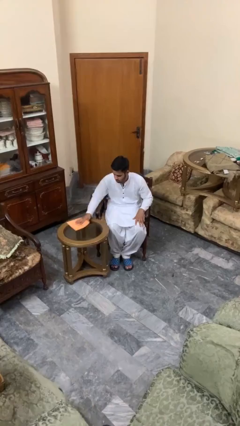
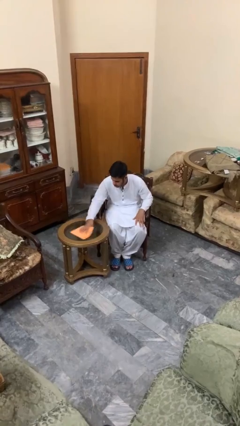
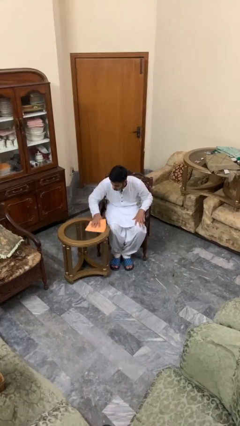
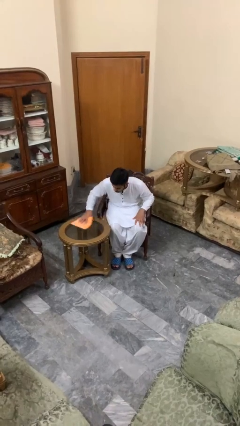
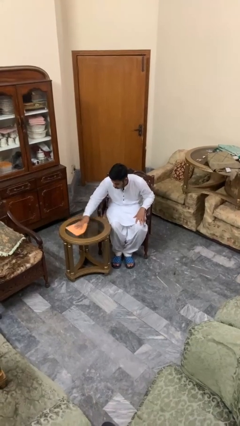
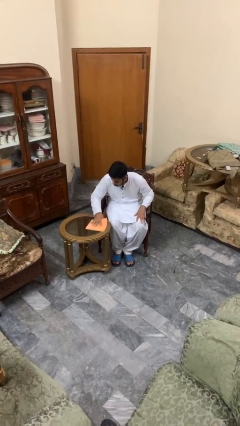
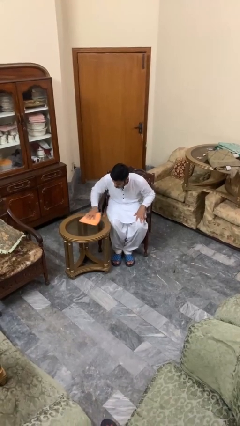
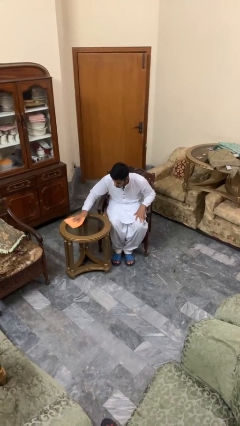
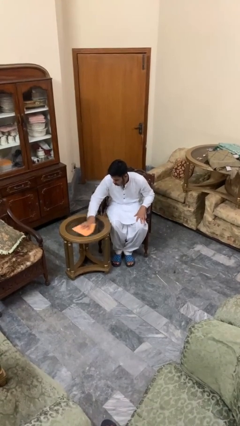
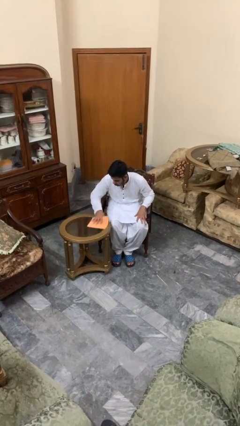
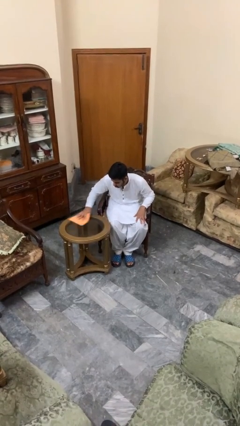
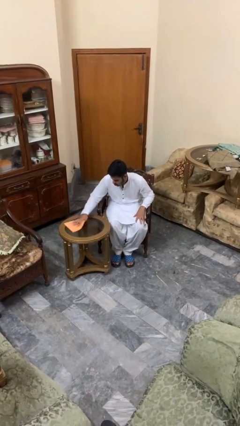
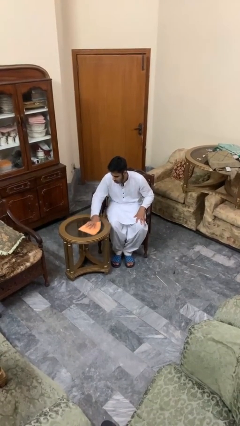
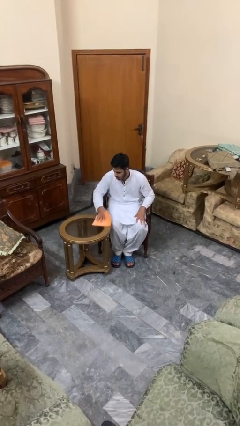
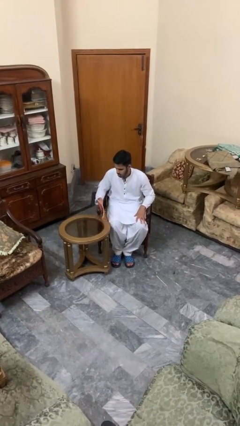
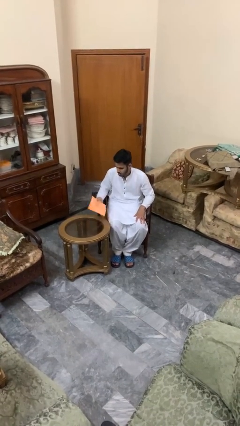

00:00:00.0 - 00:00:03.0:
person cleans table with rag

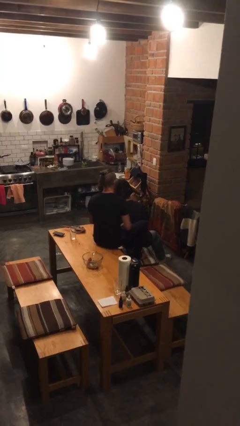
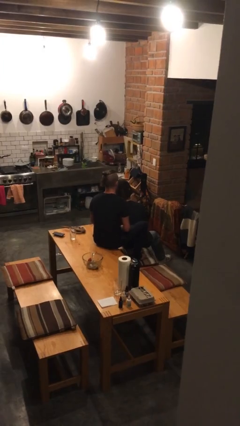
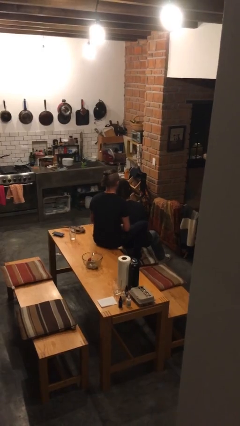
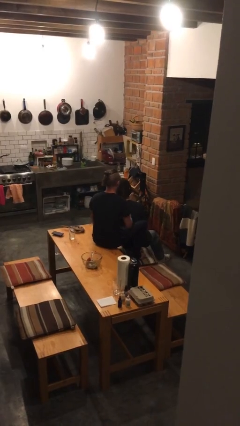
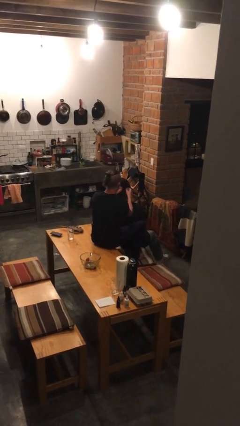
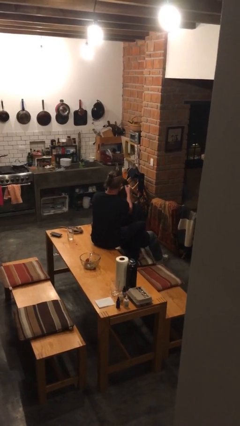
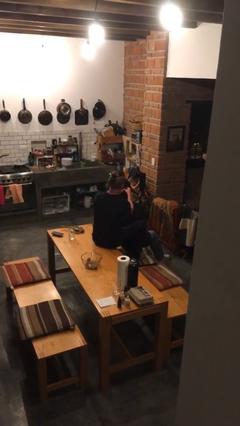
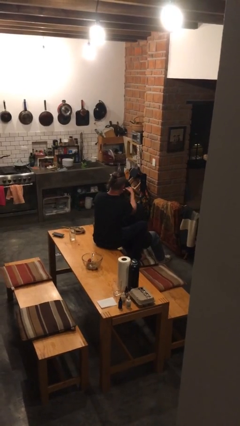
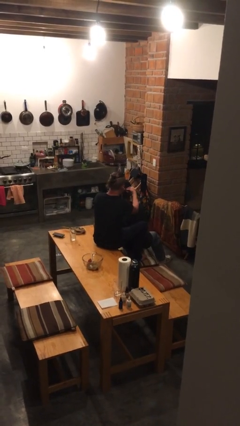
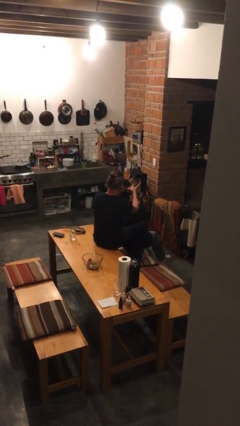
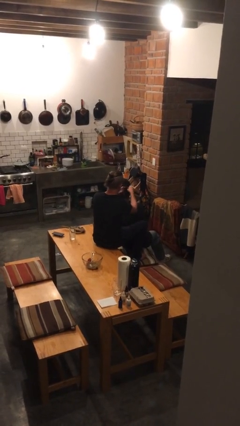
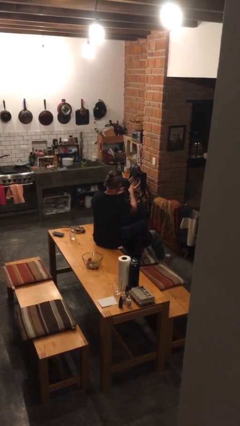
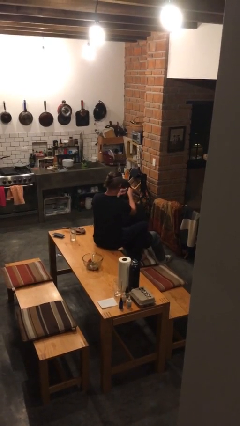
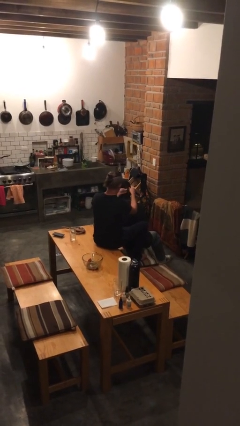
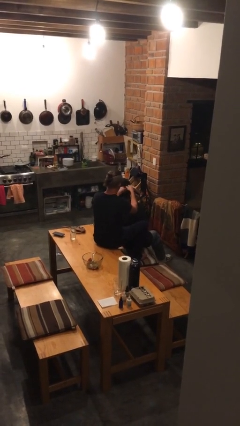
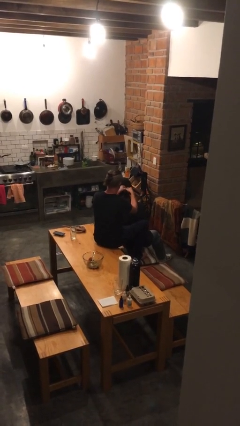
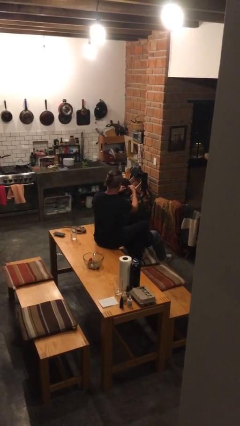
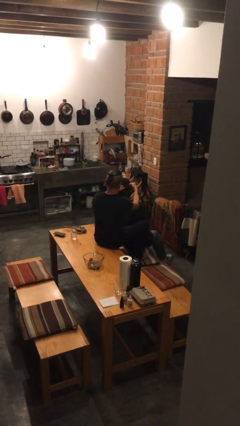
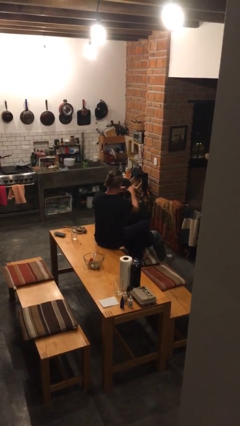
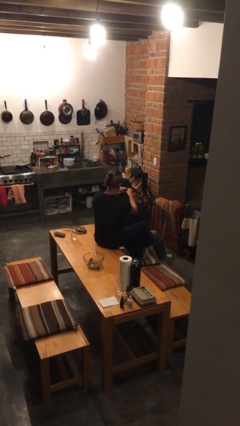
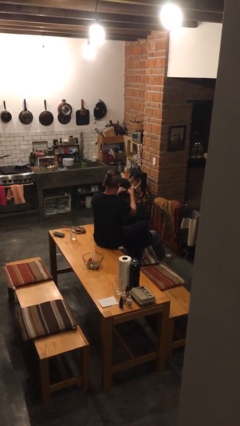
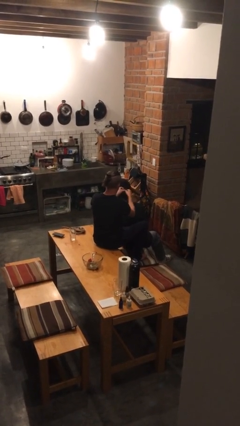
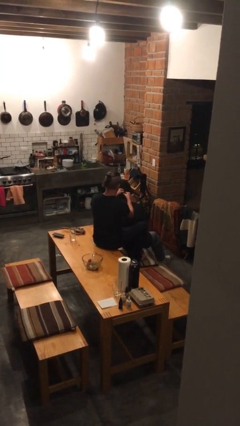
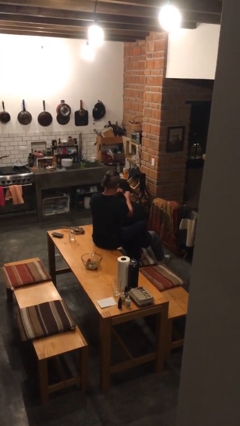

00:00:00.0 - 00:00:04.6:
person braids hair of person

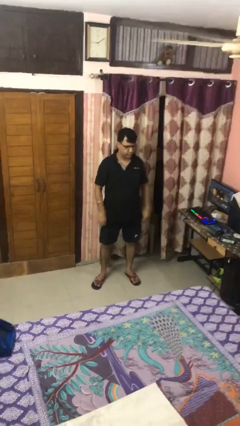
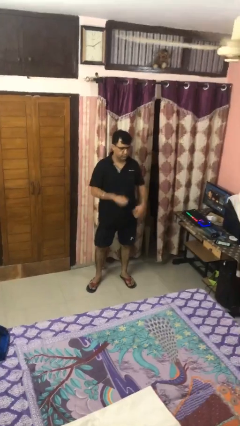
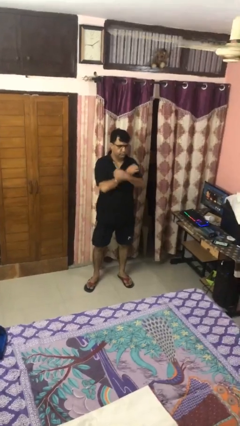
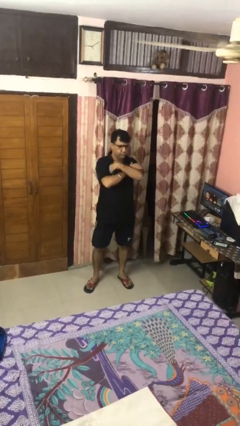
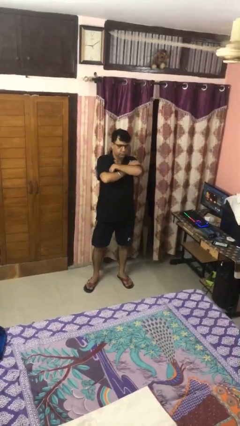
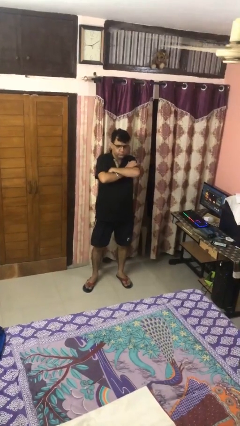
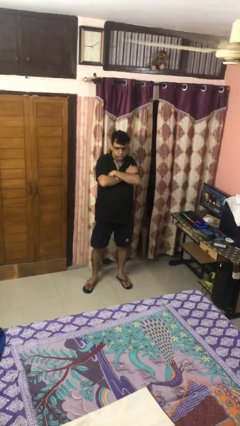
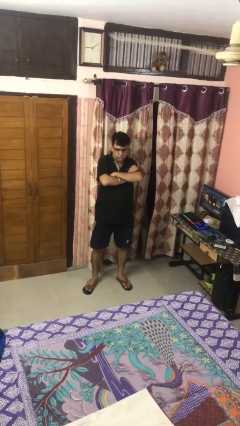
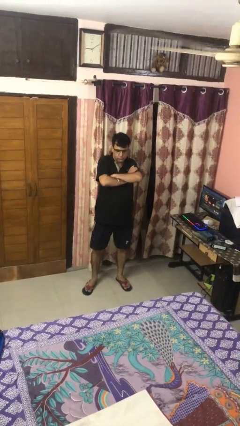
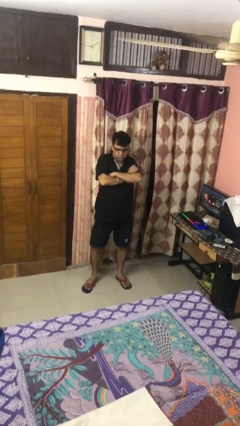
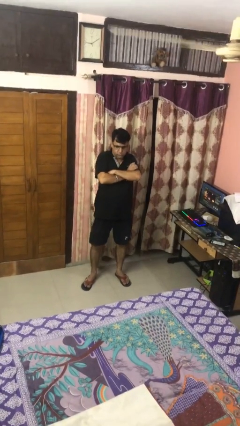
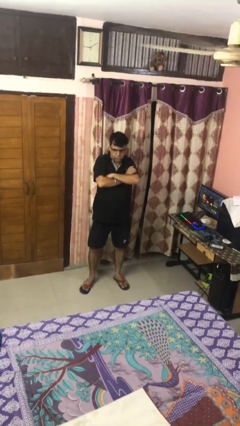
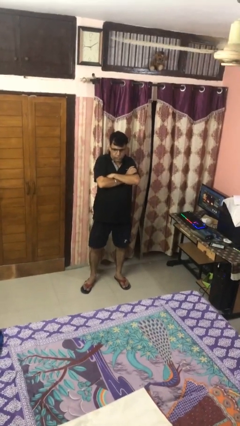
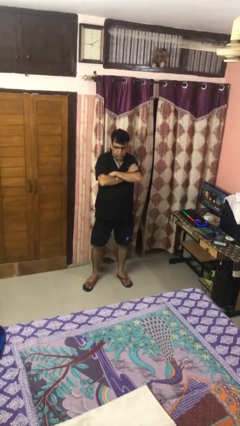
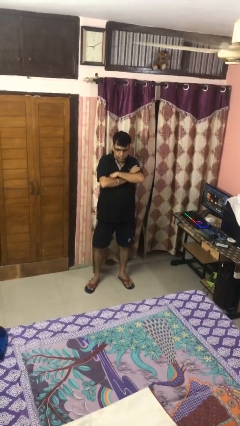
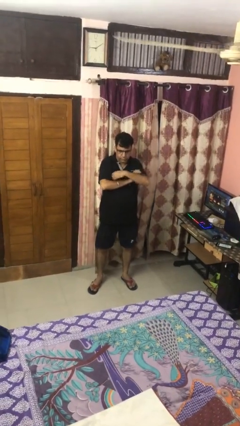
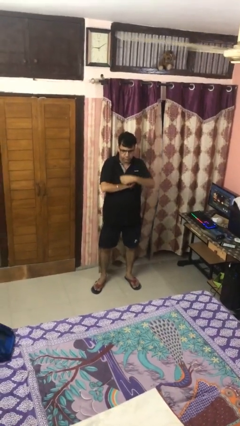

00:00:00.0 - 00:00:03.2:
person crosses arms

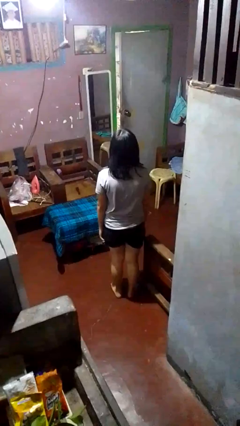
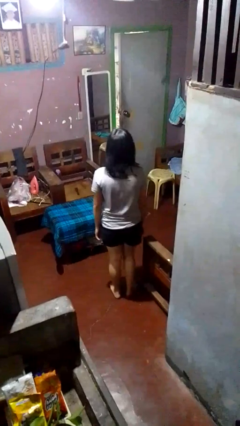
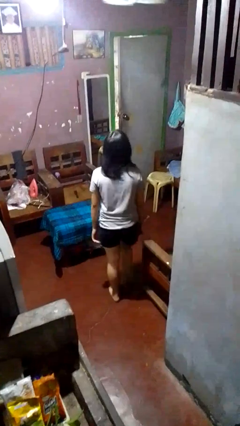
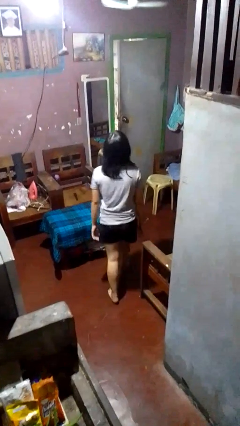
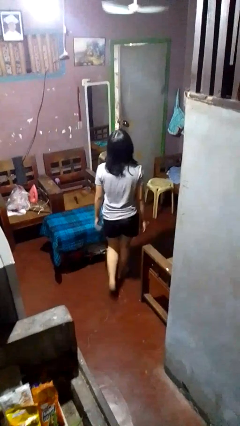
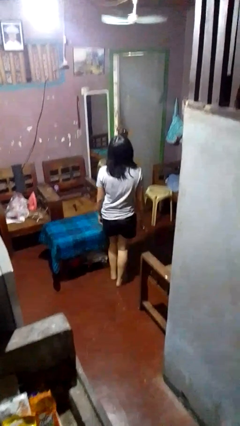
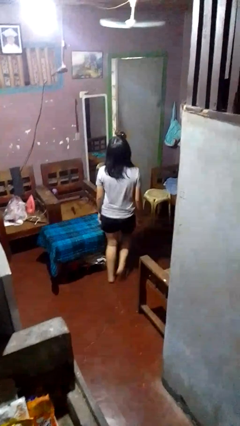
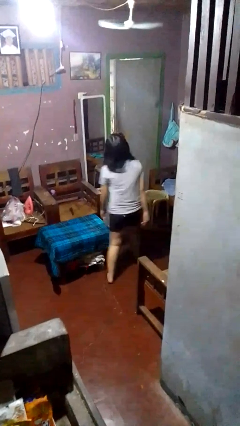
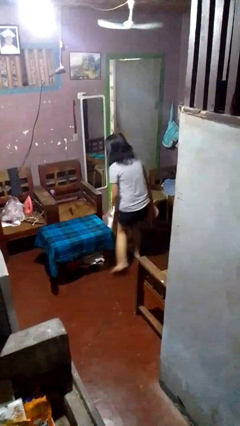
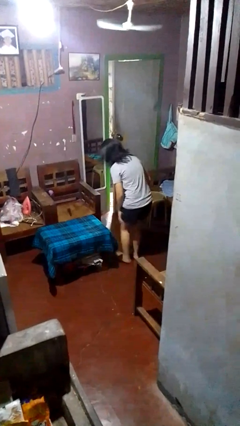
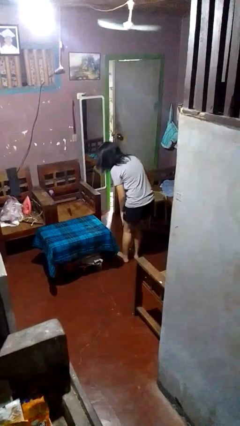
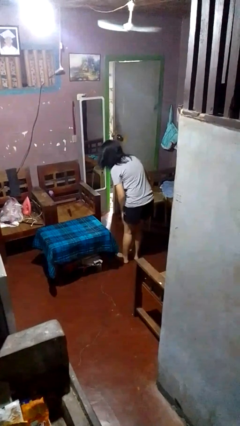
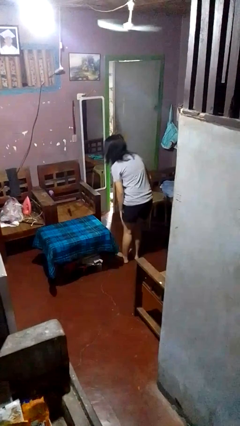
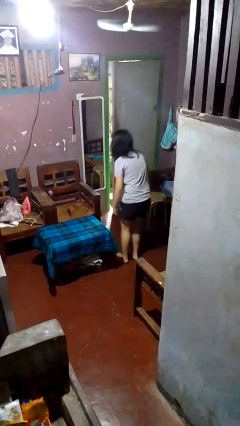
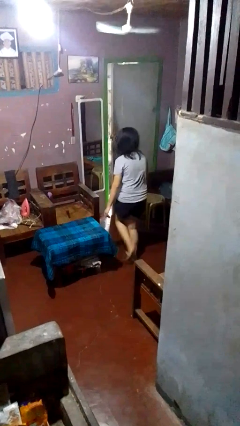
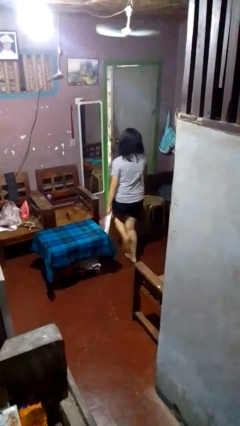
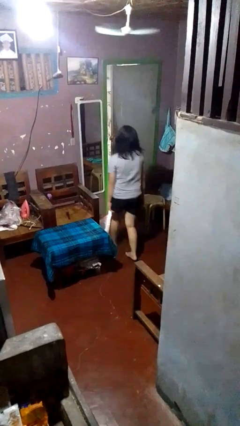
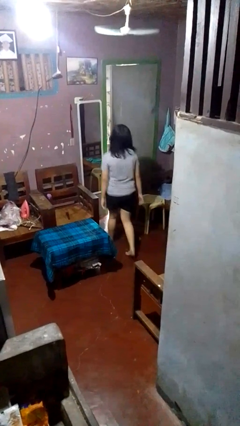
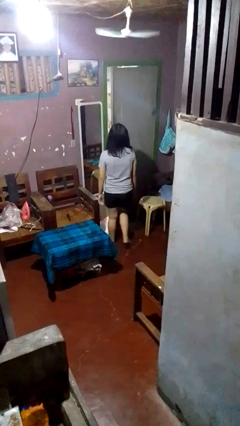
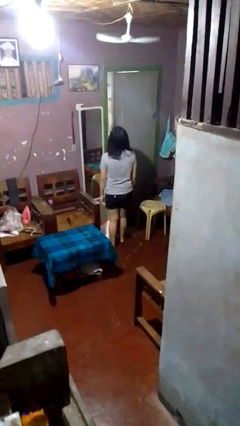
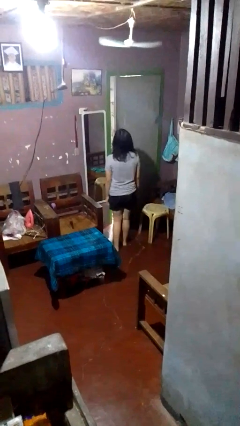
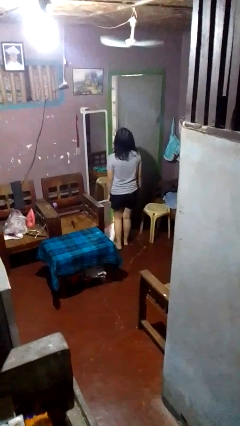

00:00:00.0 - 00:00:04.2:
person bumps into table

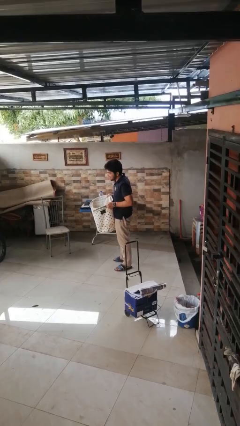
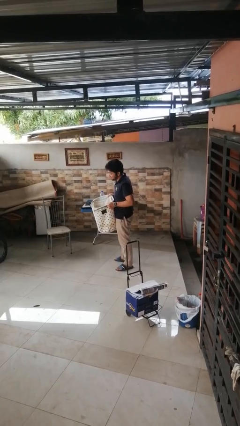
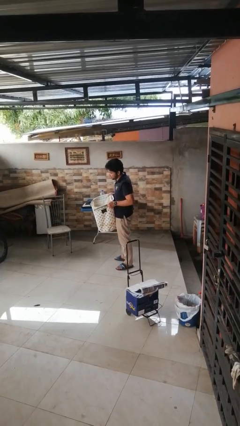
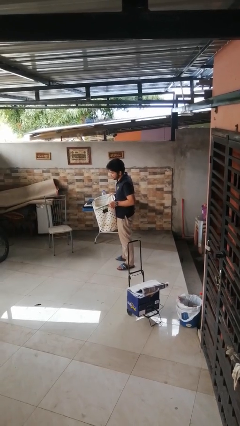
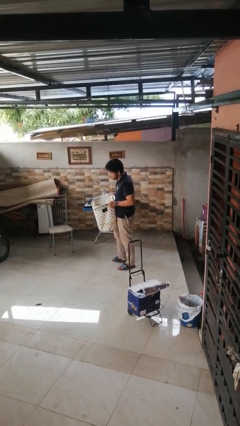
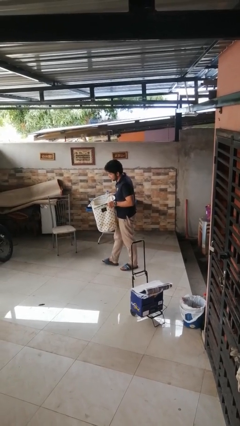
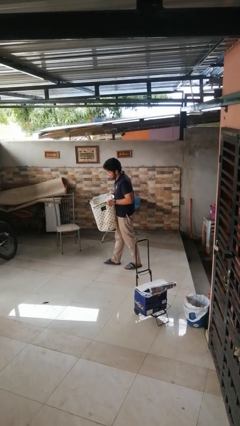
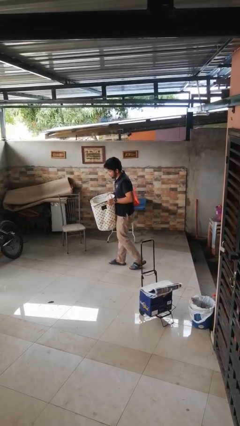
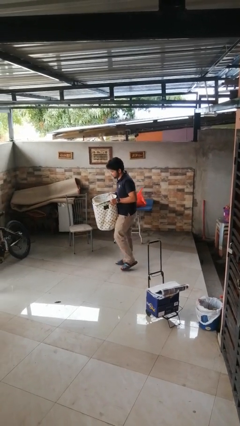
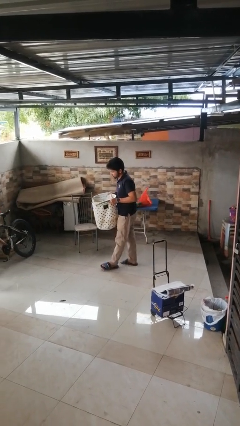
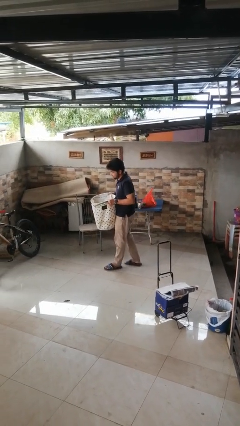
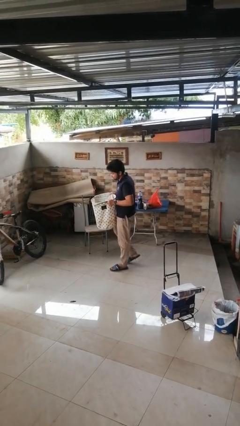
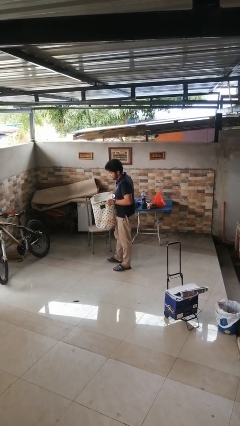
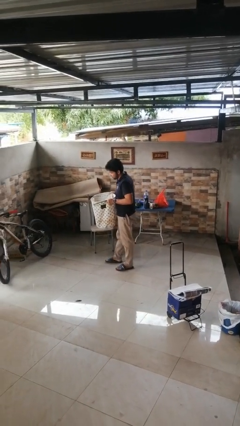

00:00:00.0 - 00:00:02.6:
person carries laundry basket
